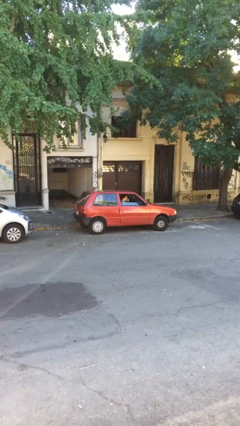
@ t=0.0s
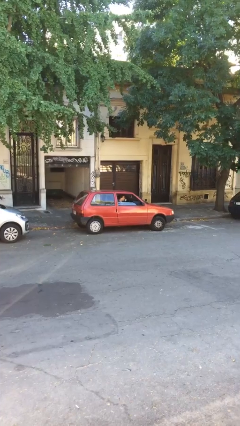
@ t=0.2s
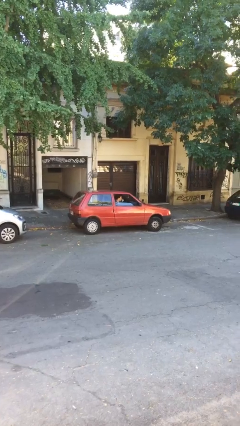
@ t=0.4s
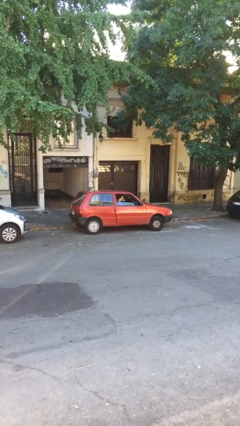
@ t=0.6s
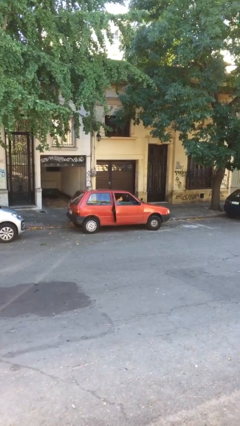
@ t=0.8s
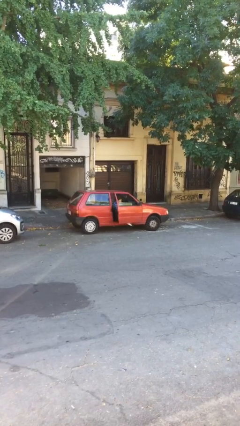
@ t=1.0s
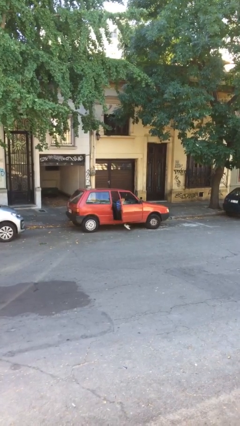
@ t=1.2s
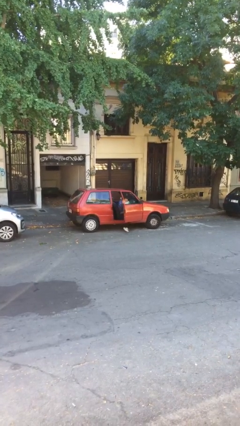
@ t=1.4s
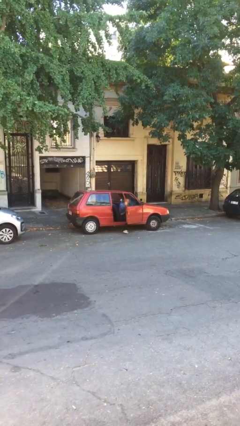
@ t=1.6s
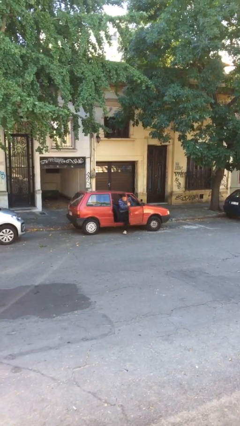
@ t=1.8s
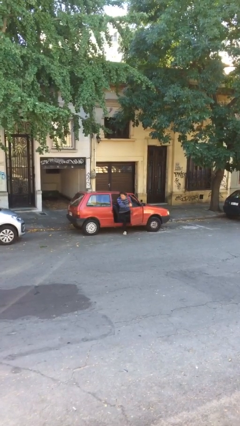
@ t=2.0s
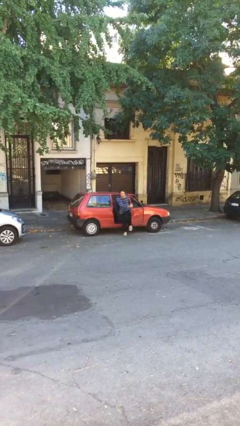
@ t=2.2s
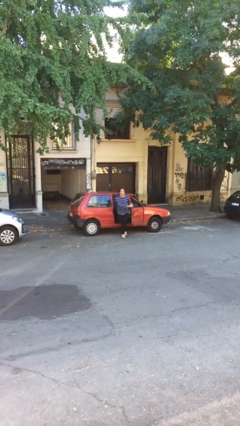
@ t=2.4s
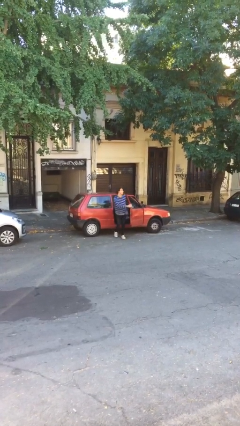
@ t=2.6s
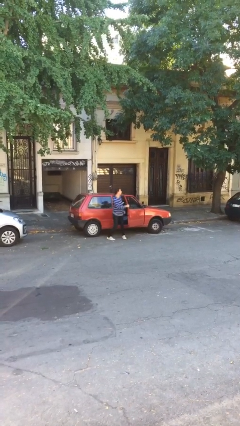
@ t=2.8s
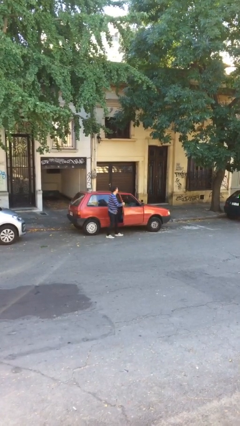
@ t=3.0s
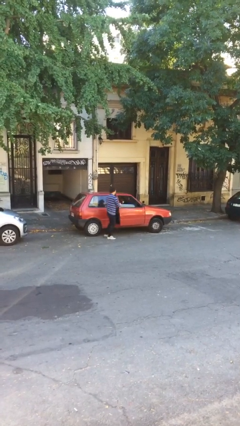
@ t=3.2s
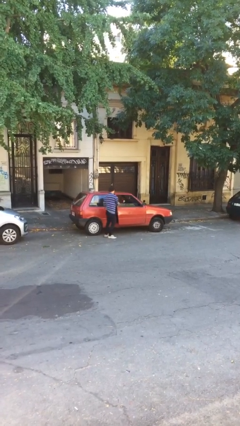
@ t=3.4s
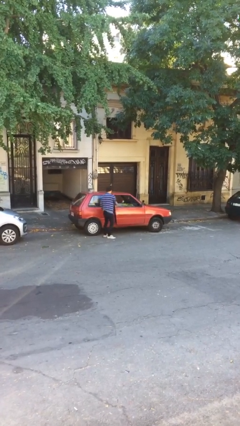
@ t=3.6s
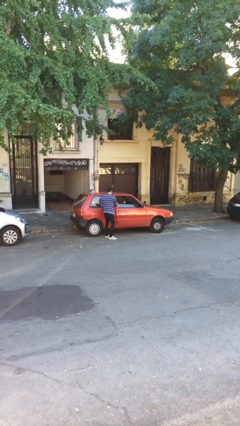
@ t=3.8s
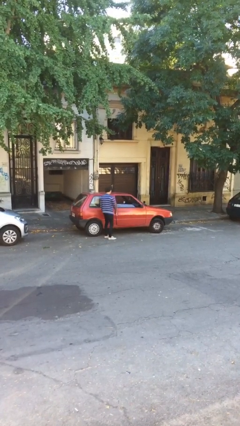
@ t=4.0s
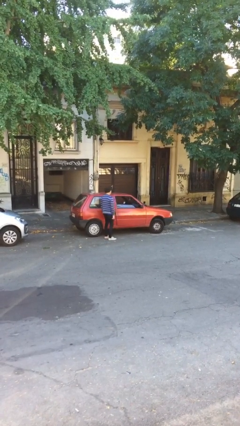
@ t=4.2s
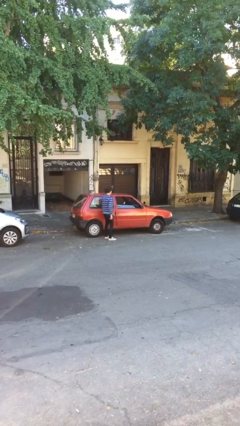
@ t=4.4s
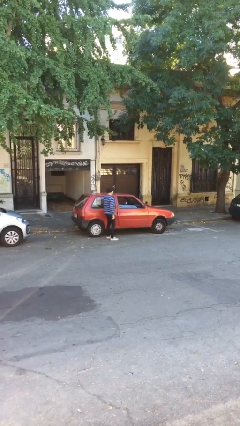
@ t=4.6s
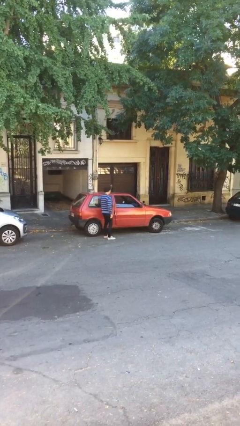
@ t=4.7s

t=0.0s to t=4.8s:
car drops off person

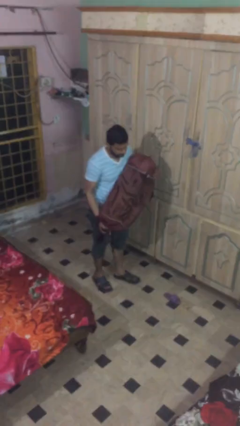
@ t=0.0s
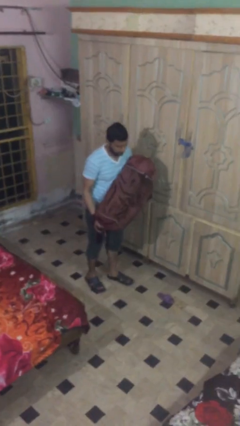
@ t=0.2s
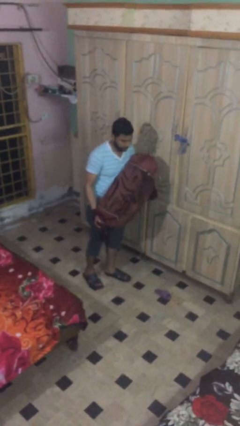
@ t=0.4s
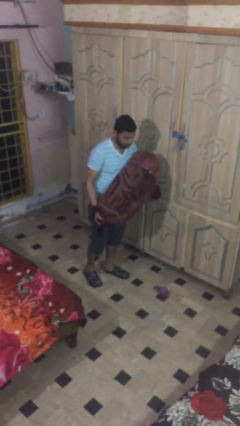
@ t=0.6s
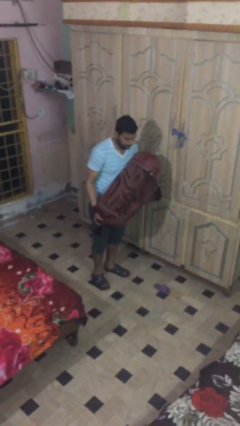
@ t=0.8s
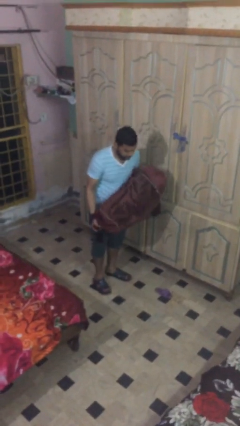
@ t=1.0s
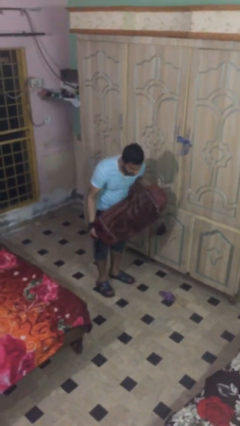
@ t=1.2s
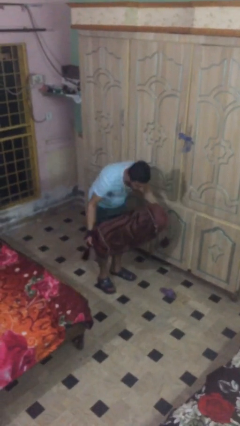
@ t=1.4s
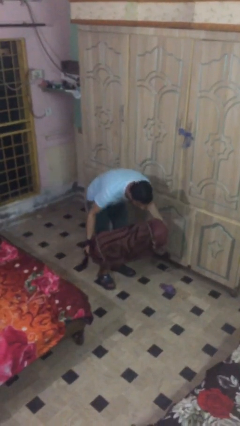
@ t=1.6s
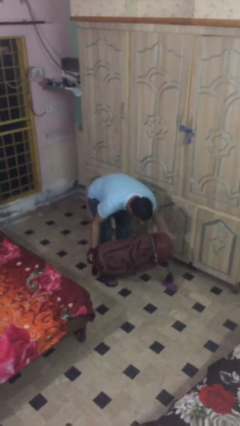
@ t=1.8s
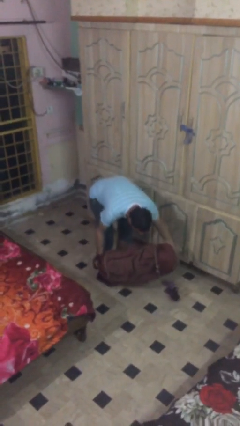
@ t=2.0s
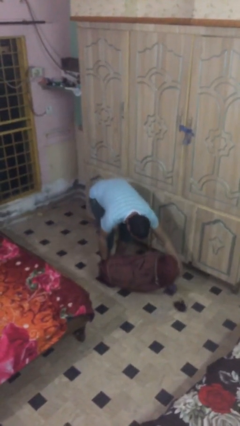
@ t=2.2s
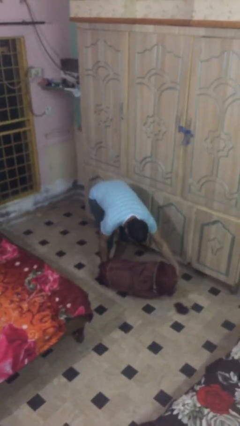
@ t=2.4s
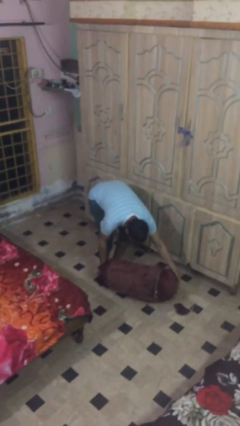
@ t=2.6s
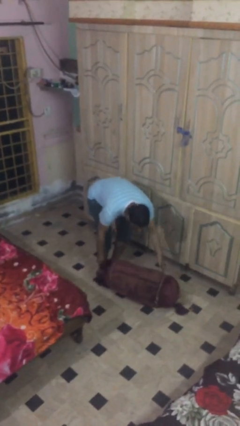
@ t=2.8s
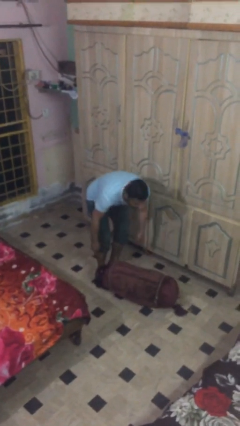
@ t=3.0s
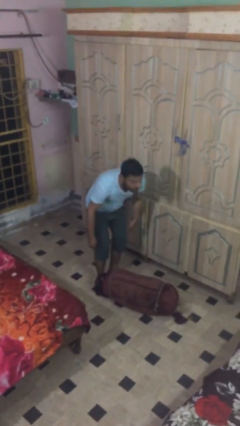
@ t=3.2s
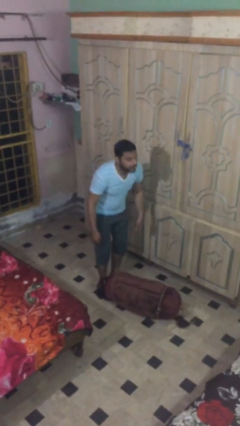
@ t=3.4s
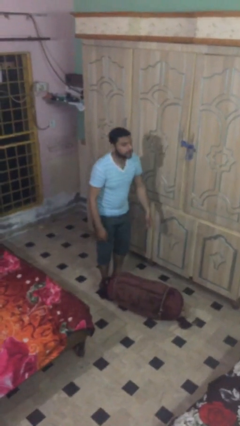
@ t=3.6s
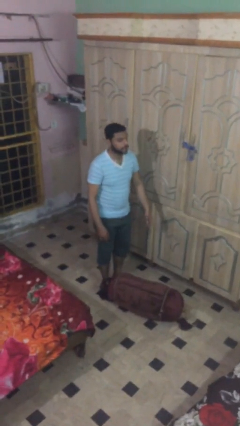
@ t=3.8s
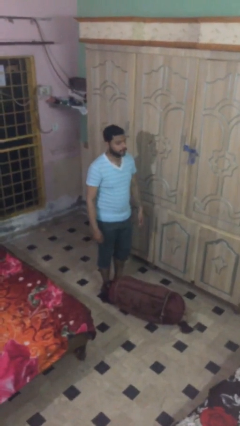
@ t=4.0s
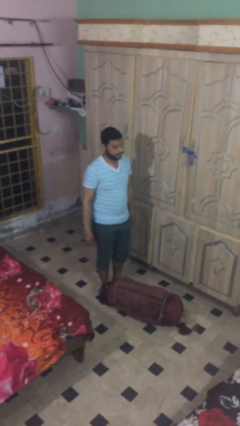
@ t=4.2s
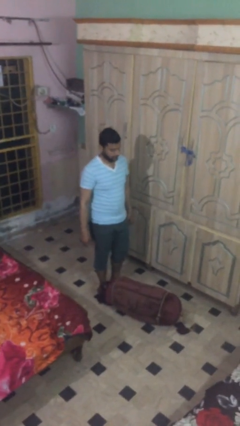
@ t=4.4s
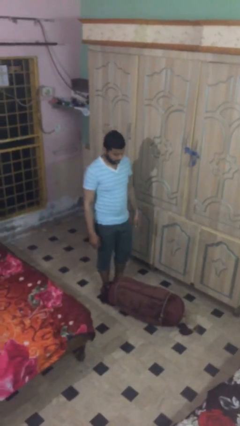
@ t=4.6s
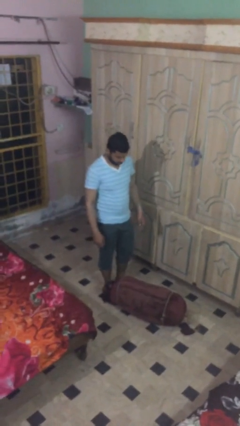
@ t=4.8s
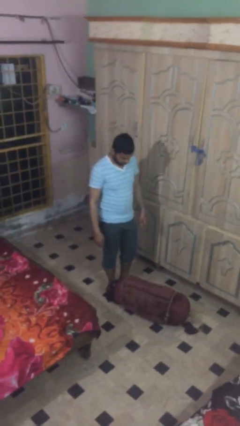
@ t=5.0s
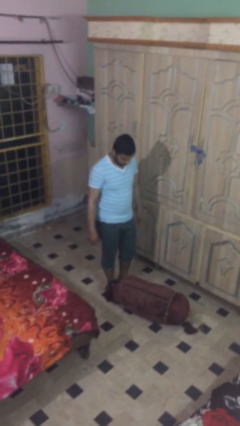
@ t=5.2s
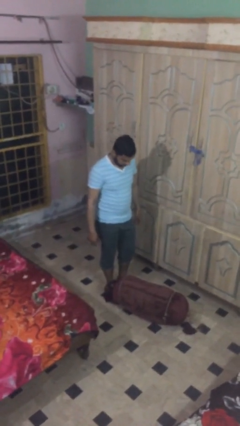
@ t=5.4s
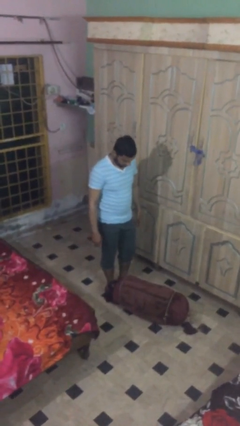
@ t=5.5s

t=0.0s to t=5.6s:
person puts down object on floor

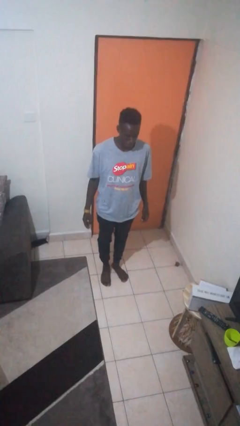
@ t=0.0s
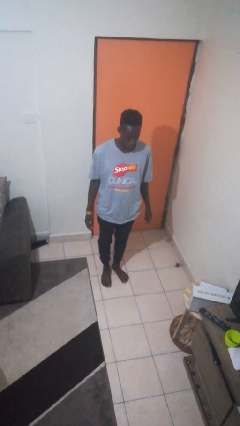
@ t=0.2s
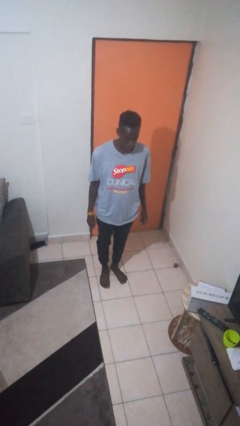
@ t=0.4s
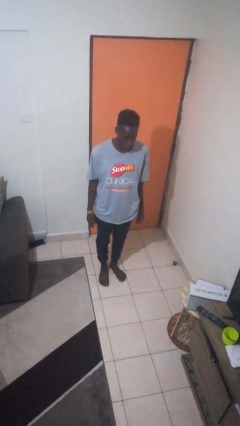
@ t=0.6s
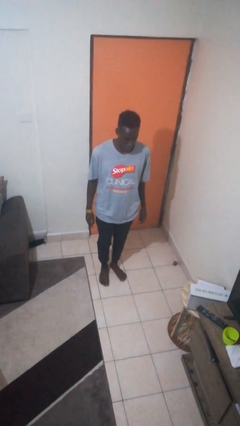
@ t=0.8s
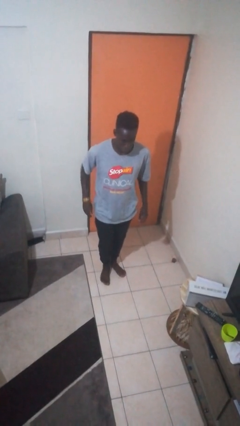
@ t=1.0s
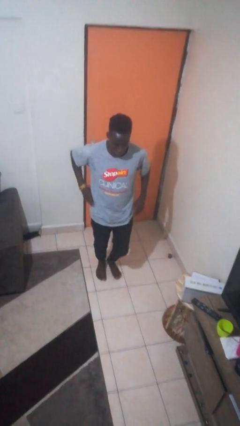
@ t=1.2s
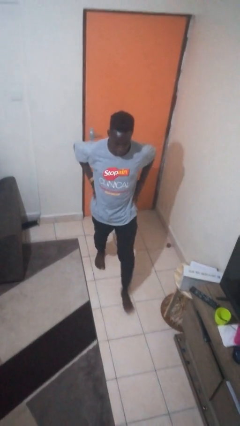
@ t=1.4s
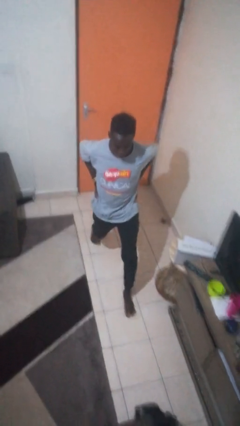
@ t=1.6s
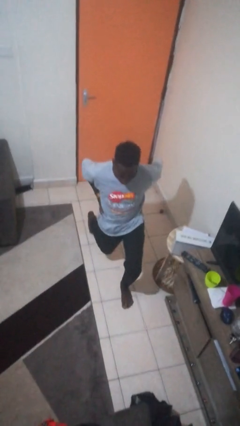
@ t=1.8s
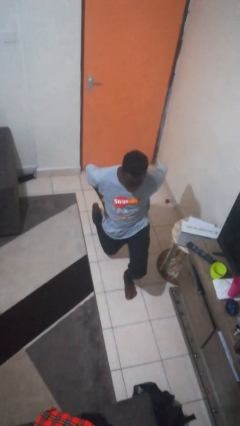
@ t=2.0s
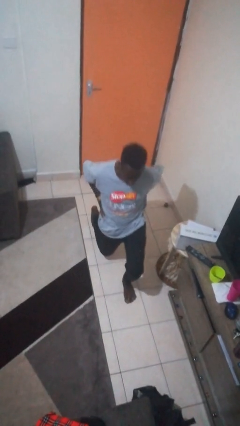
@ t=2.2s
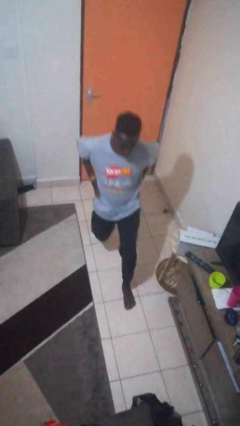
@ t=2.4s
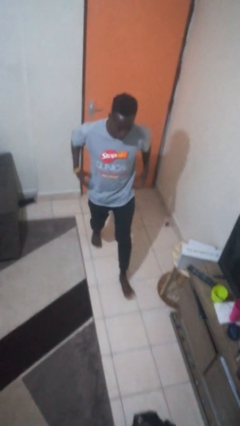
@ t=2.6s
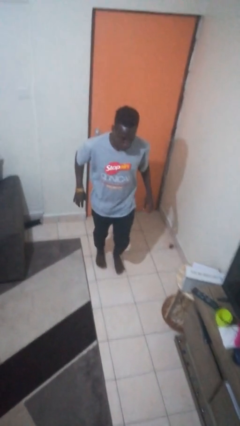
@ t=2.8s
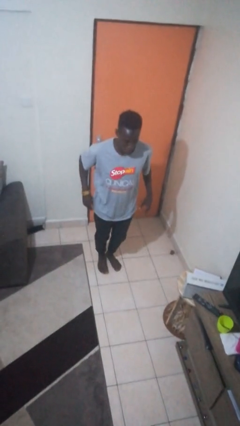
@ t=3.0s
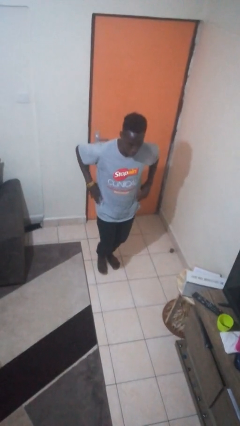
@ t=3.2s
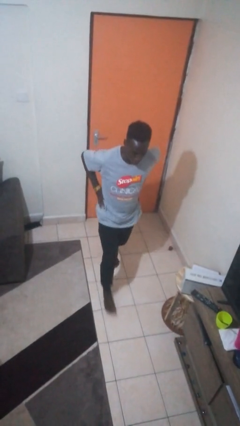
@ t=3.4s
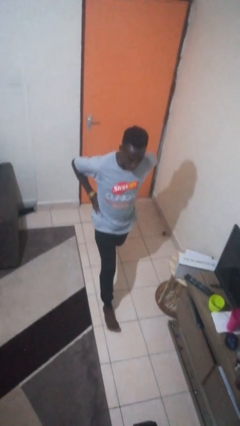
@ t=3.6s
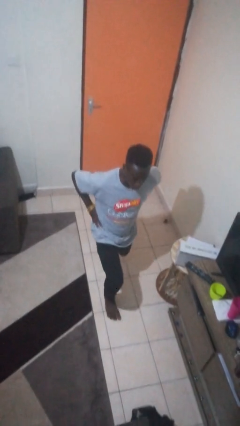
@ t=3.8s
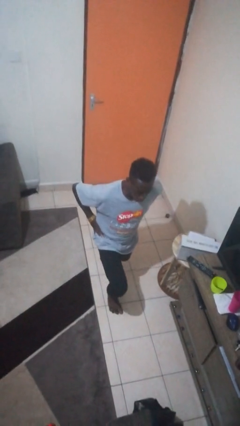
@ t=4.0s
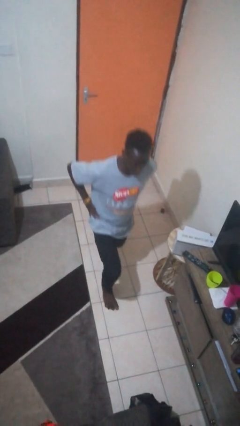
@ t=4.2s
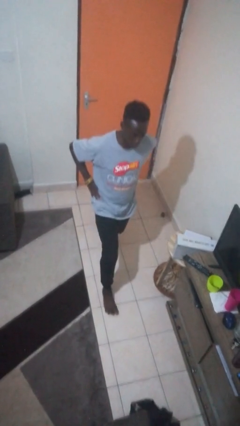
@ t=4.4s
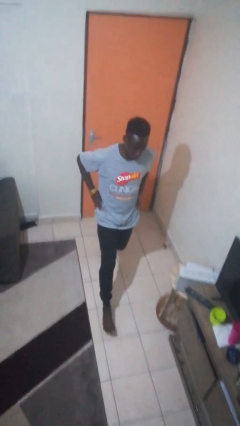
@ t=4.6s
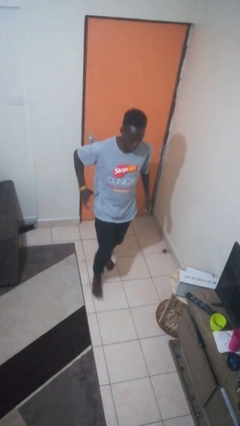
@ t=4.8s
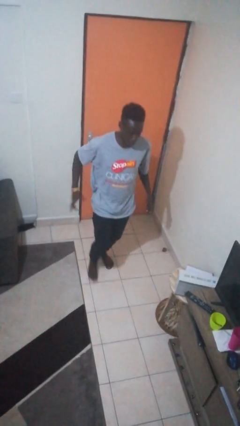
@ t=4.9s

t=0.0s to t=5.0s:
person exercises with lunges

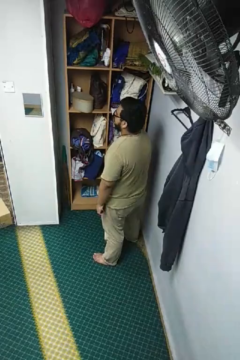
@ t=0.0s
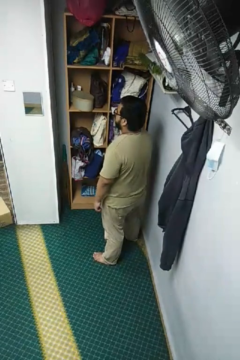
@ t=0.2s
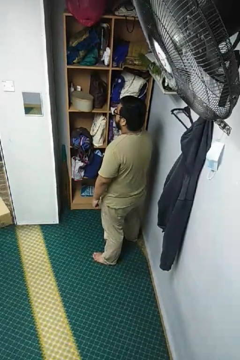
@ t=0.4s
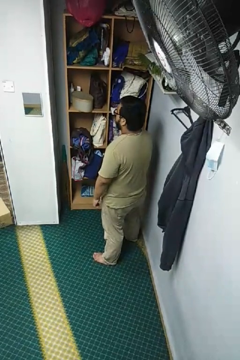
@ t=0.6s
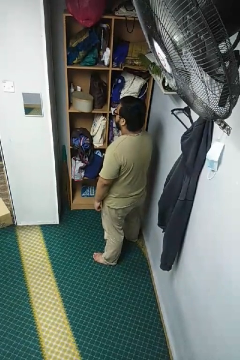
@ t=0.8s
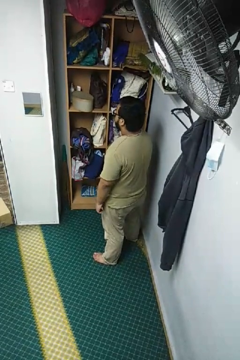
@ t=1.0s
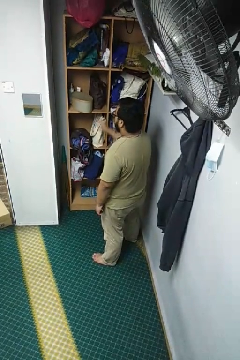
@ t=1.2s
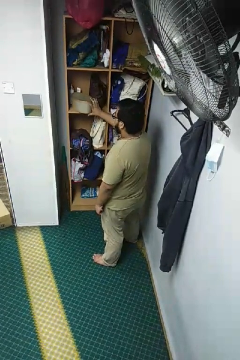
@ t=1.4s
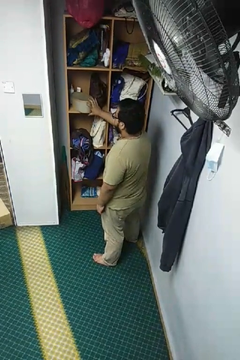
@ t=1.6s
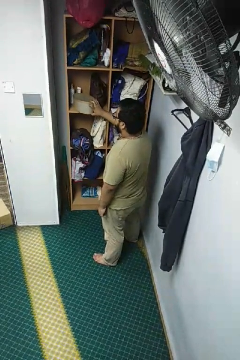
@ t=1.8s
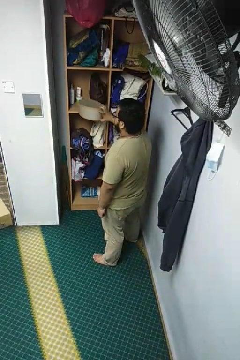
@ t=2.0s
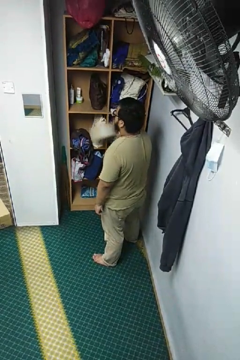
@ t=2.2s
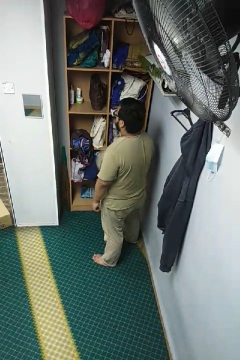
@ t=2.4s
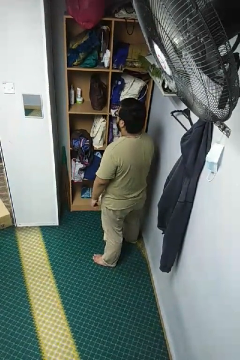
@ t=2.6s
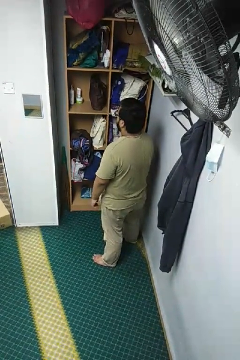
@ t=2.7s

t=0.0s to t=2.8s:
person picks up object from cabinet
